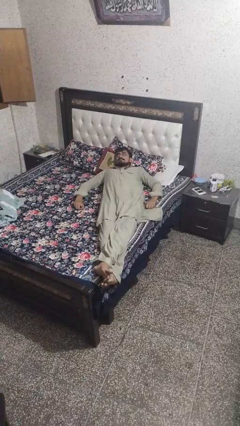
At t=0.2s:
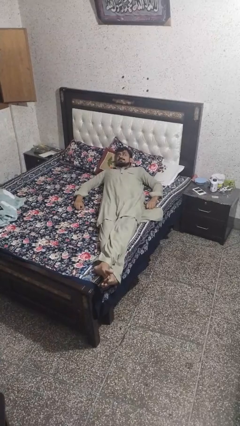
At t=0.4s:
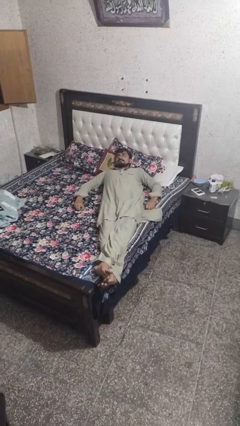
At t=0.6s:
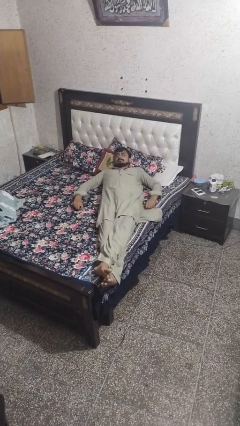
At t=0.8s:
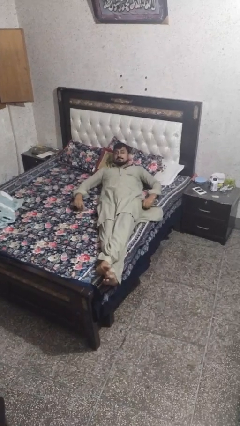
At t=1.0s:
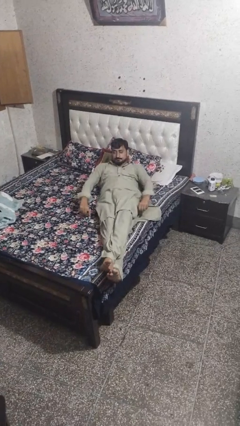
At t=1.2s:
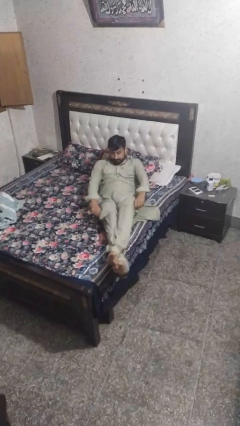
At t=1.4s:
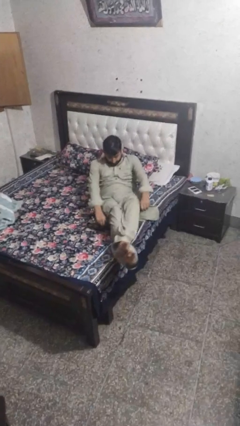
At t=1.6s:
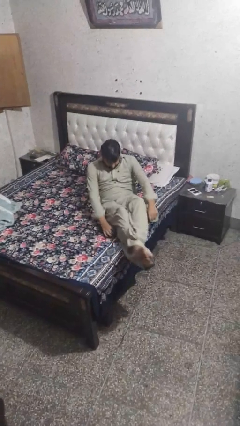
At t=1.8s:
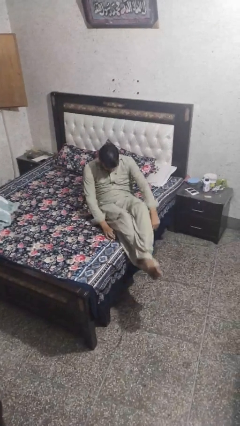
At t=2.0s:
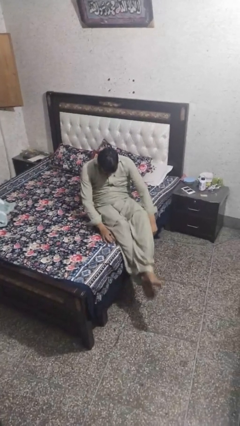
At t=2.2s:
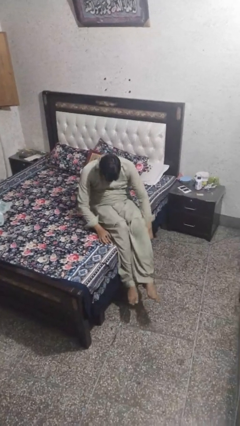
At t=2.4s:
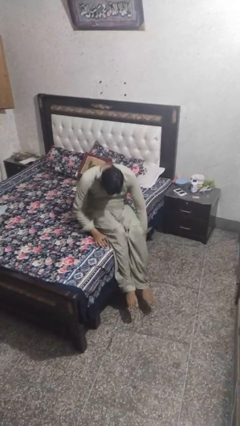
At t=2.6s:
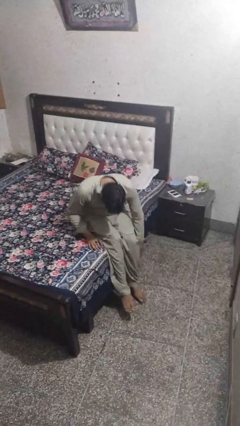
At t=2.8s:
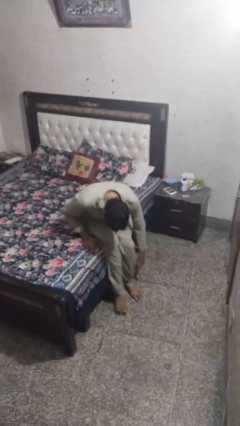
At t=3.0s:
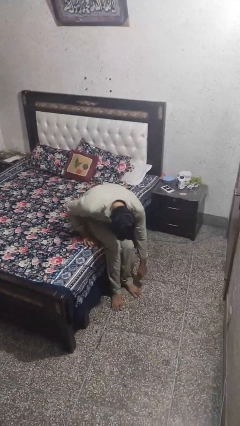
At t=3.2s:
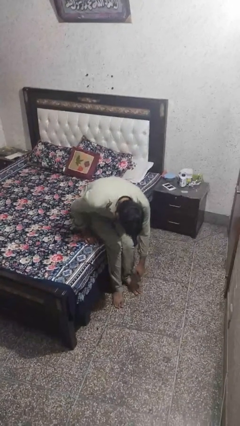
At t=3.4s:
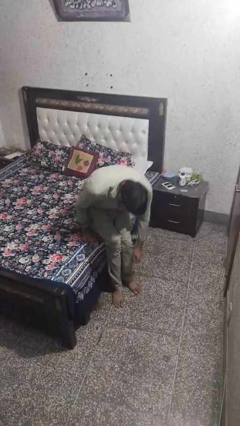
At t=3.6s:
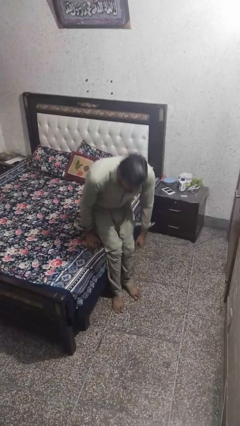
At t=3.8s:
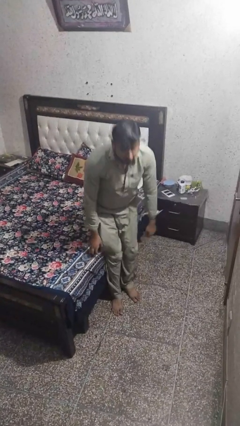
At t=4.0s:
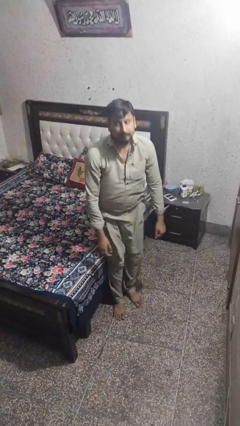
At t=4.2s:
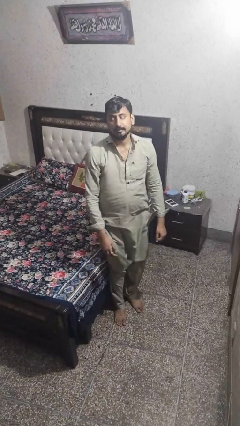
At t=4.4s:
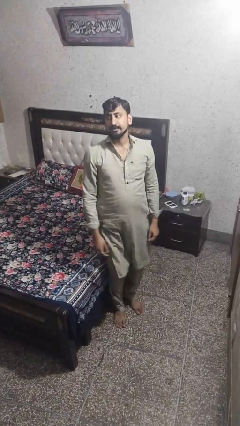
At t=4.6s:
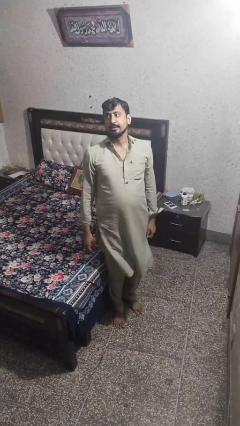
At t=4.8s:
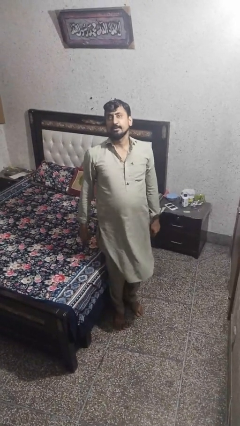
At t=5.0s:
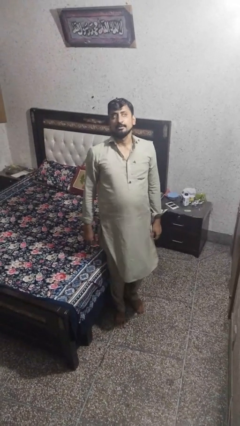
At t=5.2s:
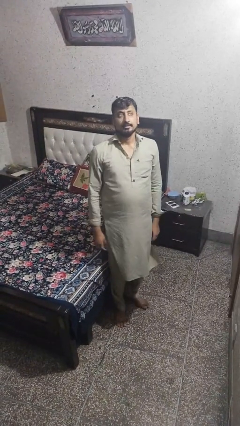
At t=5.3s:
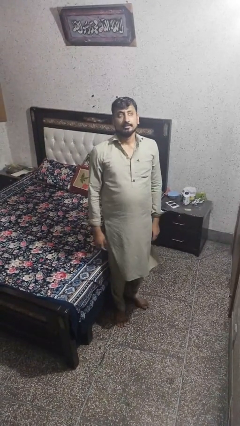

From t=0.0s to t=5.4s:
person stands up

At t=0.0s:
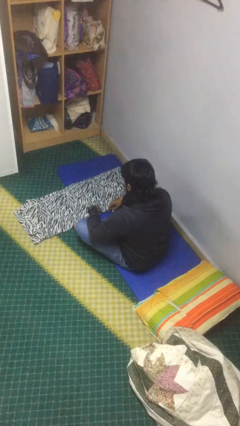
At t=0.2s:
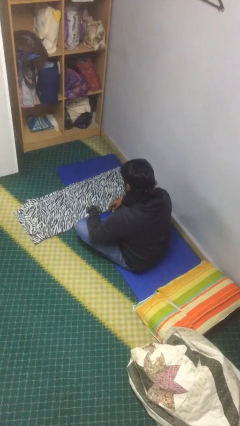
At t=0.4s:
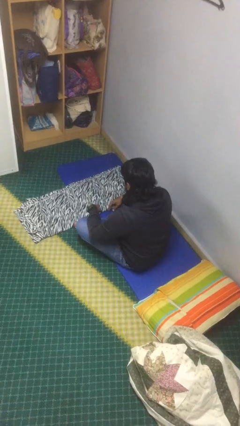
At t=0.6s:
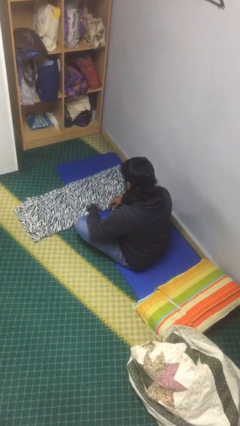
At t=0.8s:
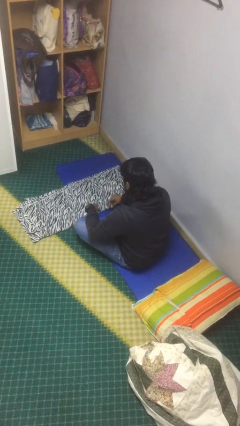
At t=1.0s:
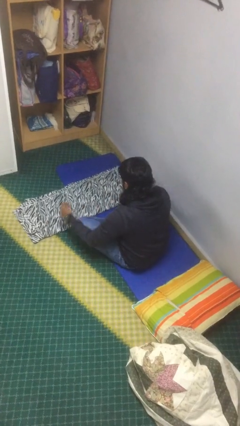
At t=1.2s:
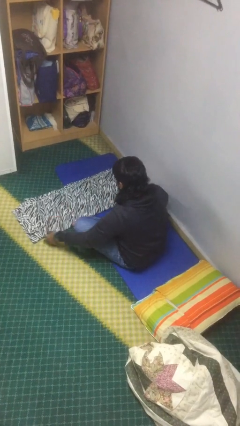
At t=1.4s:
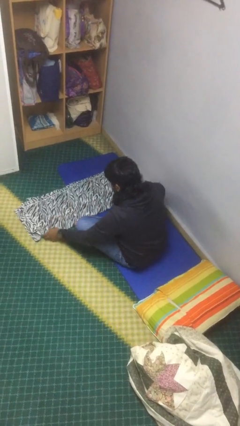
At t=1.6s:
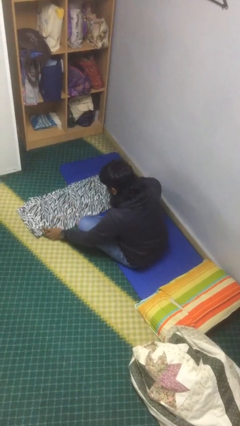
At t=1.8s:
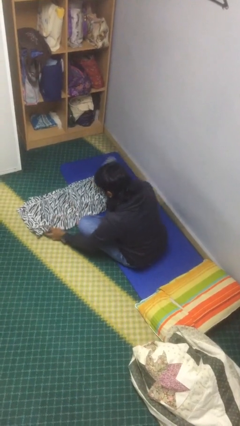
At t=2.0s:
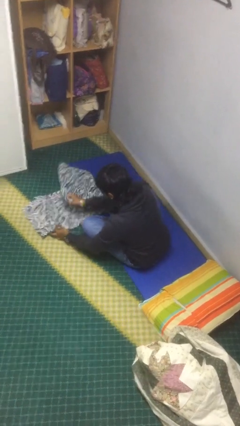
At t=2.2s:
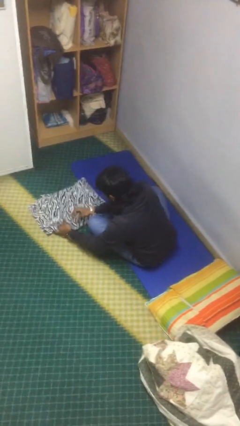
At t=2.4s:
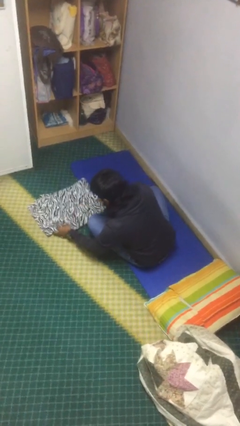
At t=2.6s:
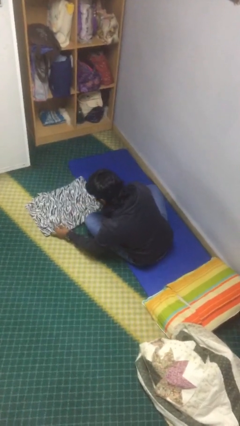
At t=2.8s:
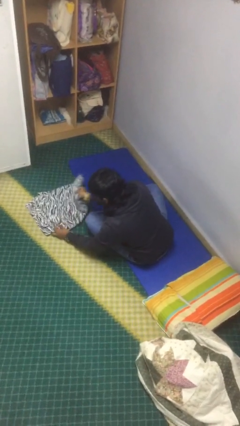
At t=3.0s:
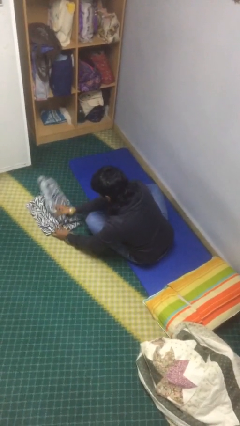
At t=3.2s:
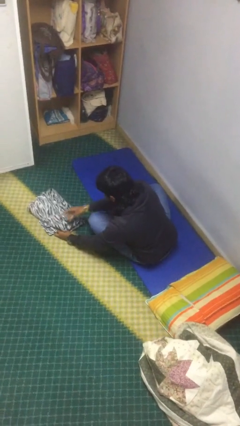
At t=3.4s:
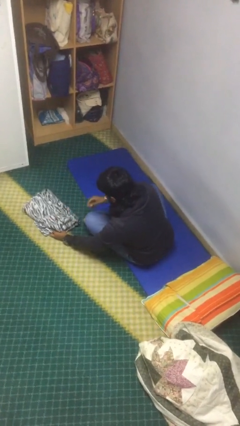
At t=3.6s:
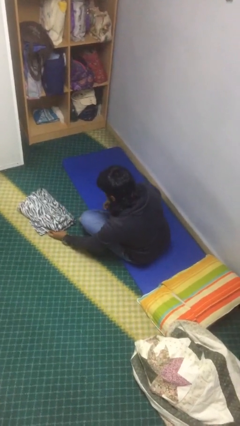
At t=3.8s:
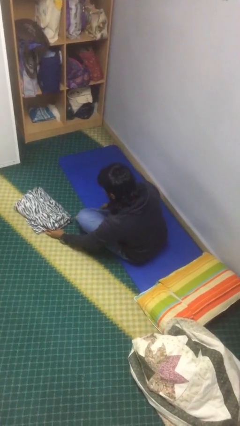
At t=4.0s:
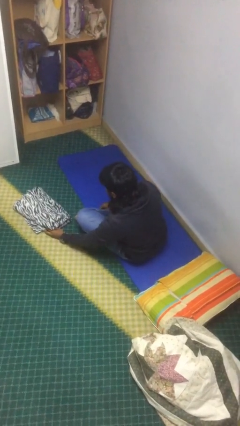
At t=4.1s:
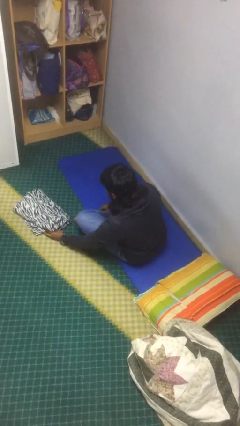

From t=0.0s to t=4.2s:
person folds blanket

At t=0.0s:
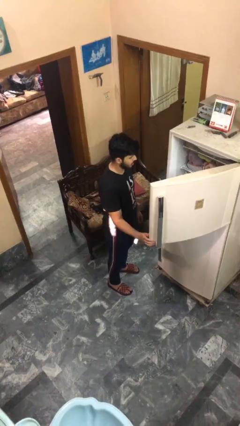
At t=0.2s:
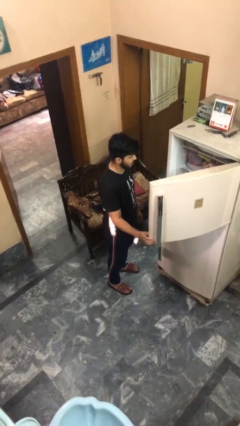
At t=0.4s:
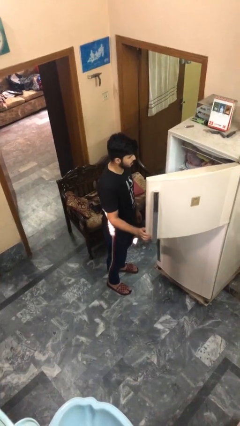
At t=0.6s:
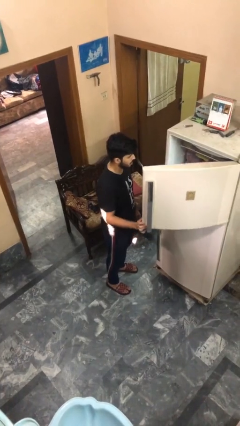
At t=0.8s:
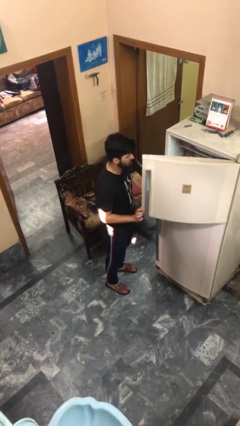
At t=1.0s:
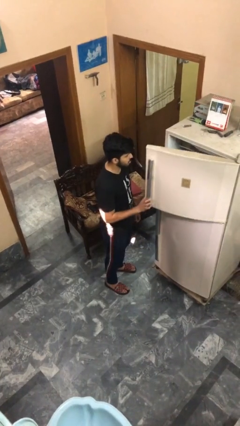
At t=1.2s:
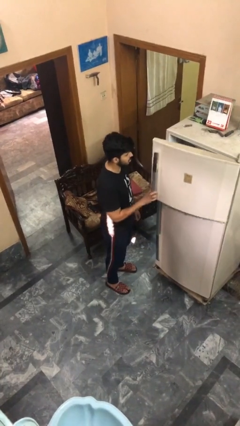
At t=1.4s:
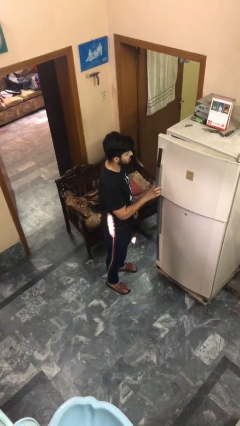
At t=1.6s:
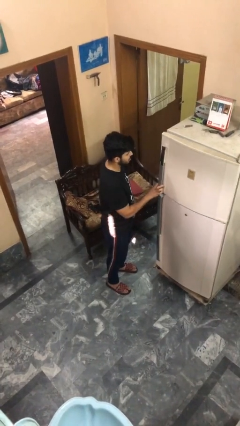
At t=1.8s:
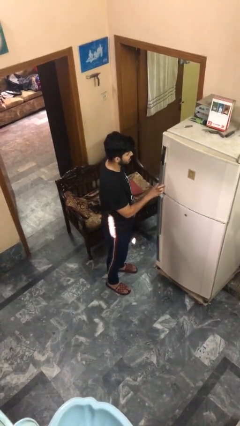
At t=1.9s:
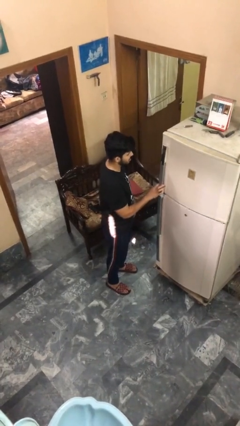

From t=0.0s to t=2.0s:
person closes refrigerator

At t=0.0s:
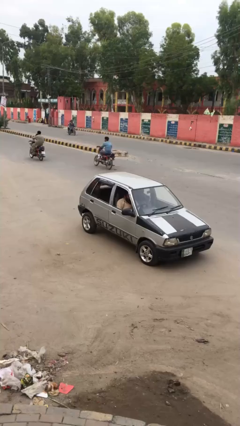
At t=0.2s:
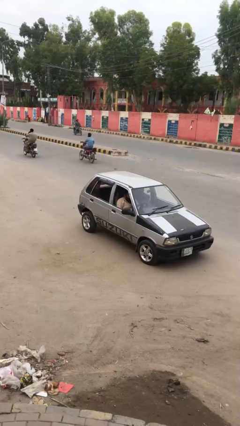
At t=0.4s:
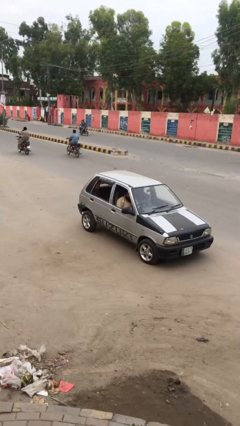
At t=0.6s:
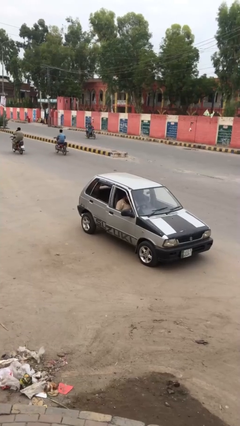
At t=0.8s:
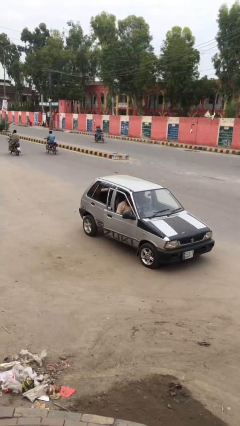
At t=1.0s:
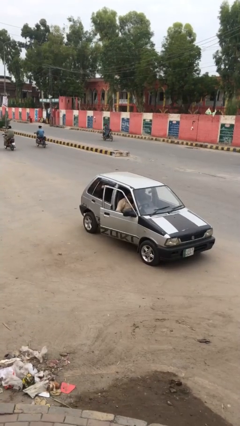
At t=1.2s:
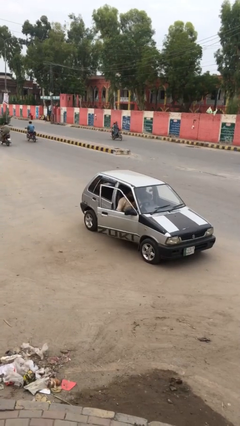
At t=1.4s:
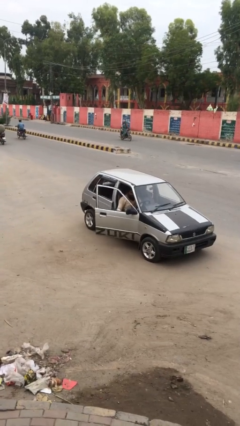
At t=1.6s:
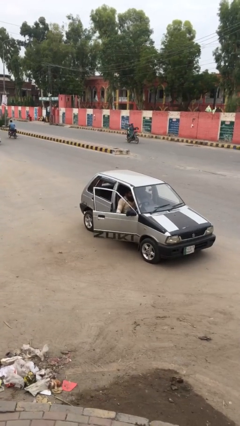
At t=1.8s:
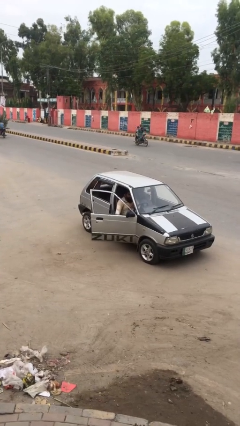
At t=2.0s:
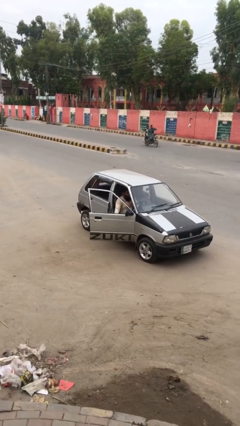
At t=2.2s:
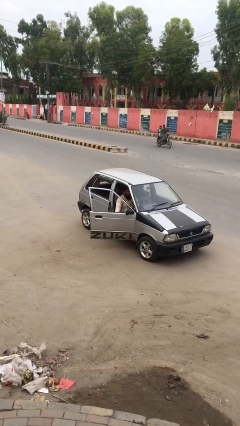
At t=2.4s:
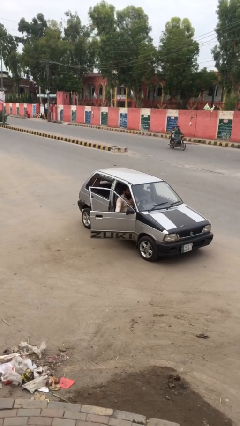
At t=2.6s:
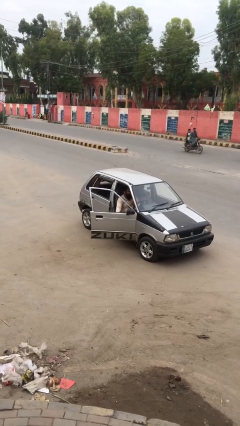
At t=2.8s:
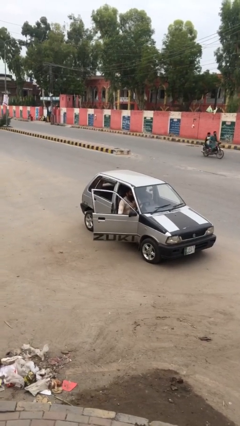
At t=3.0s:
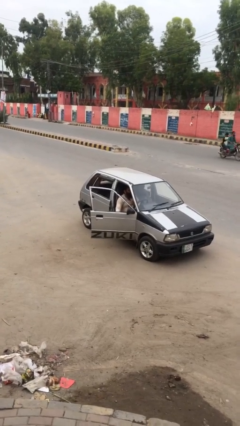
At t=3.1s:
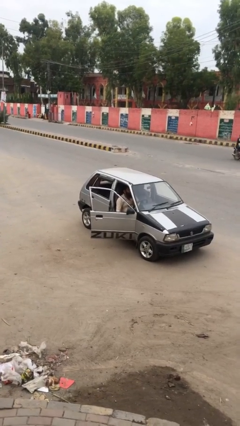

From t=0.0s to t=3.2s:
person opens car door

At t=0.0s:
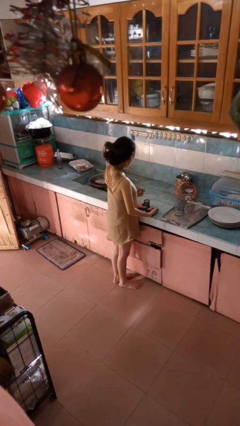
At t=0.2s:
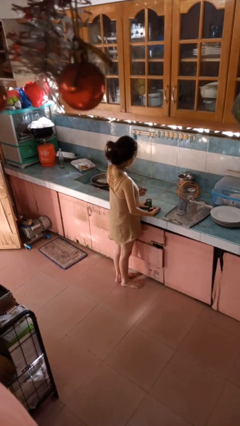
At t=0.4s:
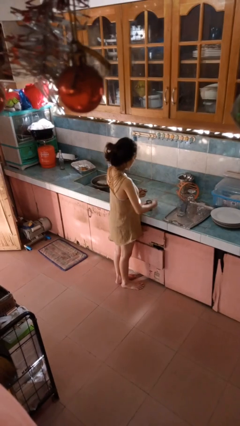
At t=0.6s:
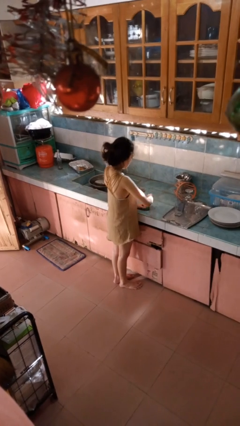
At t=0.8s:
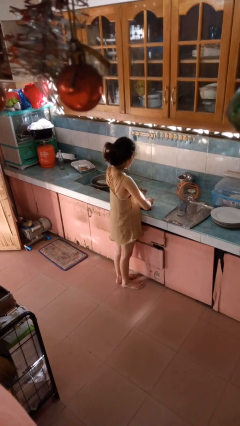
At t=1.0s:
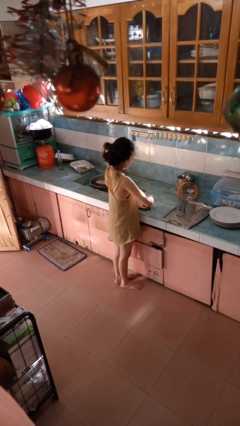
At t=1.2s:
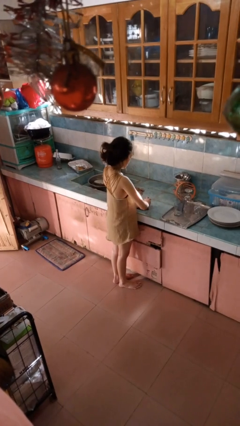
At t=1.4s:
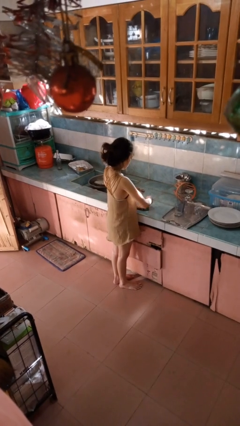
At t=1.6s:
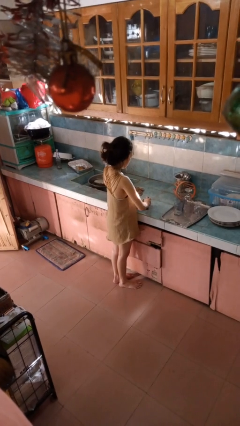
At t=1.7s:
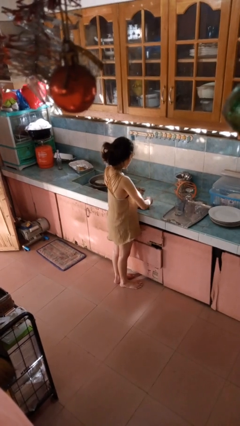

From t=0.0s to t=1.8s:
person opens can with can opener

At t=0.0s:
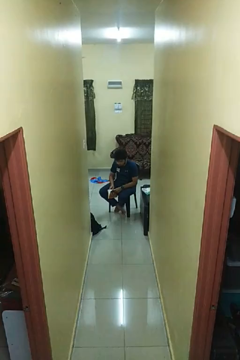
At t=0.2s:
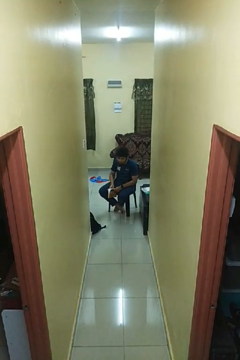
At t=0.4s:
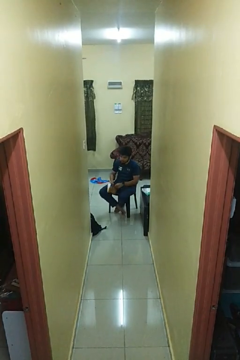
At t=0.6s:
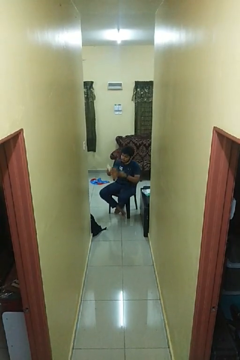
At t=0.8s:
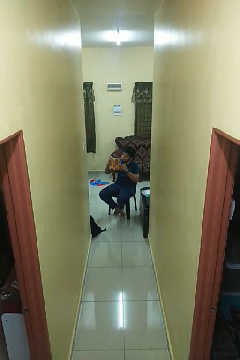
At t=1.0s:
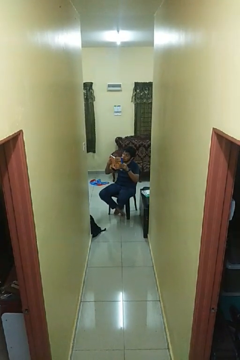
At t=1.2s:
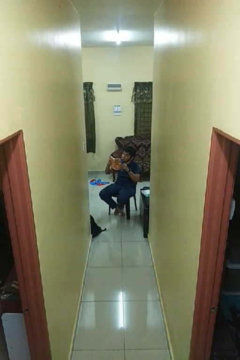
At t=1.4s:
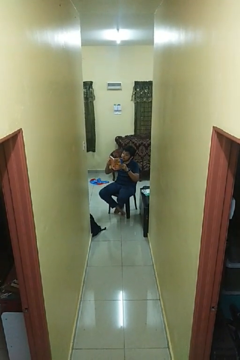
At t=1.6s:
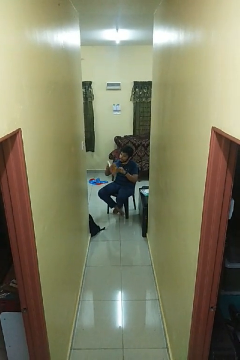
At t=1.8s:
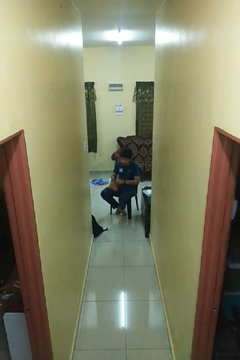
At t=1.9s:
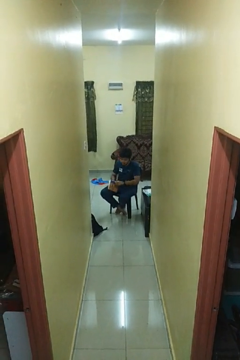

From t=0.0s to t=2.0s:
person reads book
